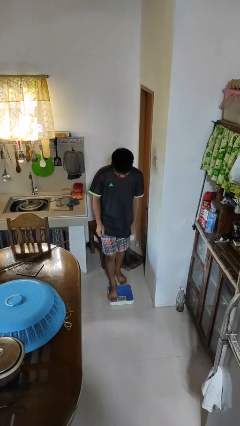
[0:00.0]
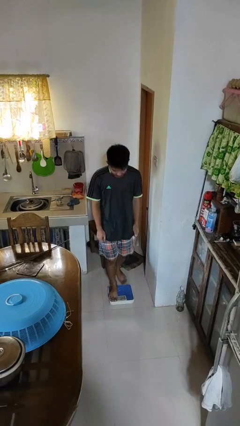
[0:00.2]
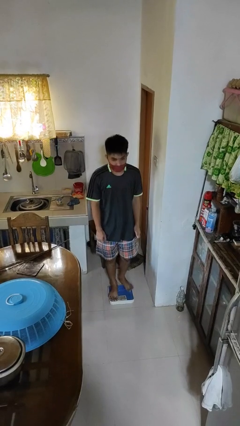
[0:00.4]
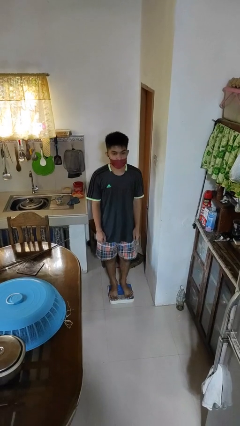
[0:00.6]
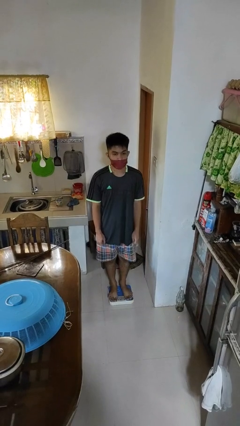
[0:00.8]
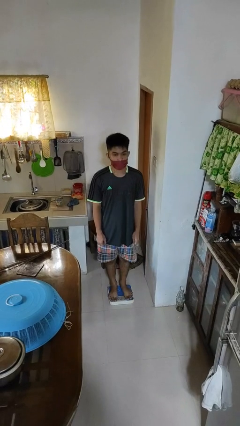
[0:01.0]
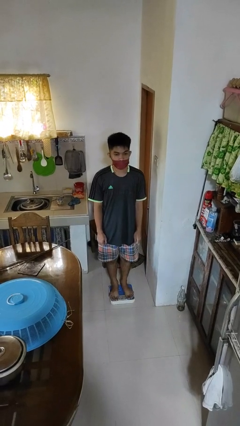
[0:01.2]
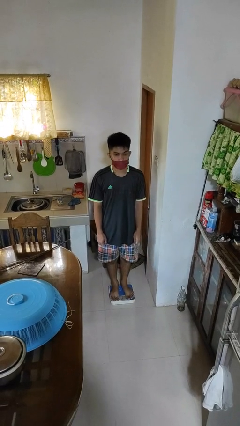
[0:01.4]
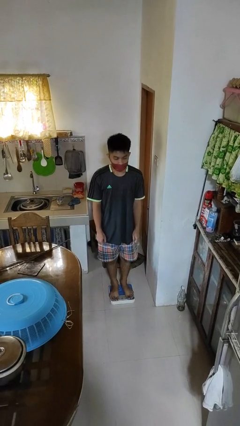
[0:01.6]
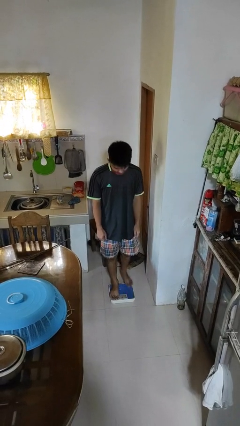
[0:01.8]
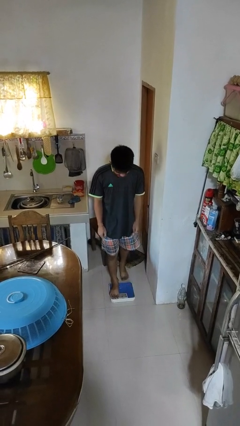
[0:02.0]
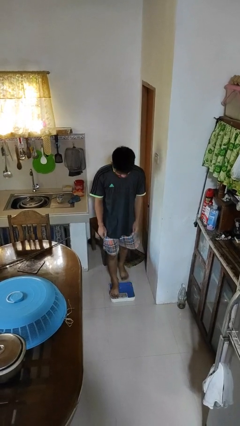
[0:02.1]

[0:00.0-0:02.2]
person uses bodyweight scale

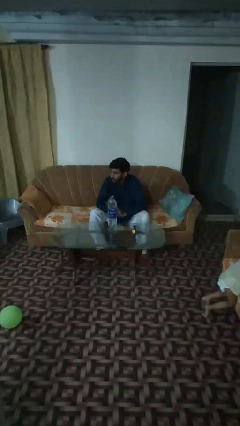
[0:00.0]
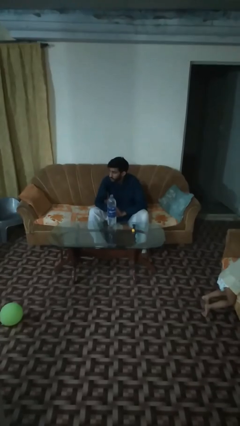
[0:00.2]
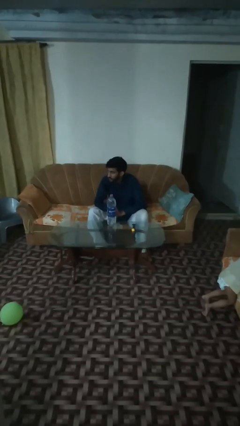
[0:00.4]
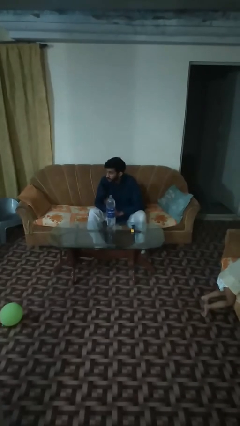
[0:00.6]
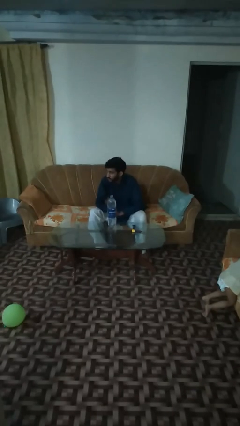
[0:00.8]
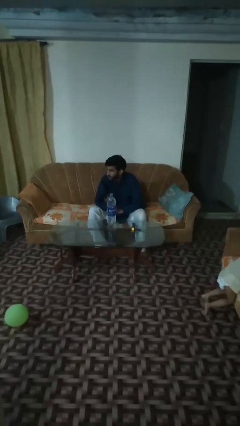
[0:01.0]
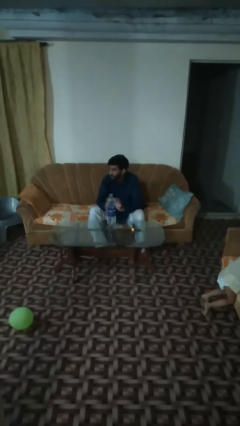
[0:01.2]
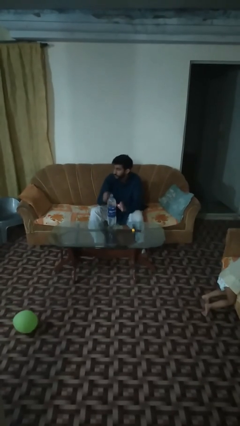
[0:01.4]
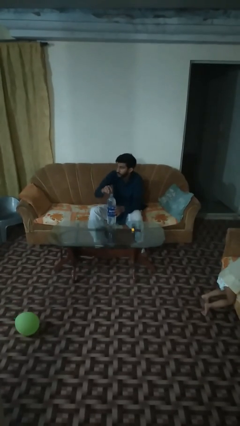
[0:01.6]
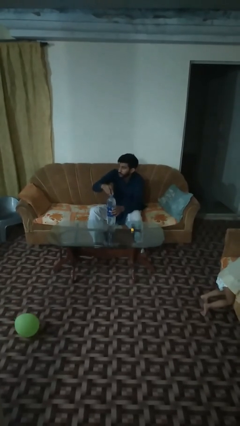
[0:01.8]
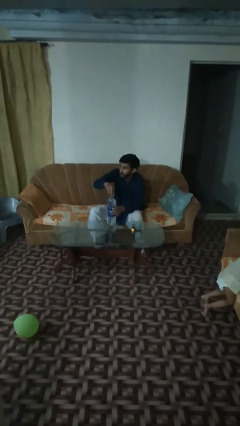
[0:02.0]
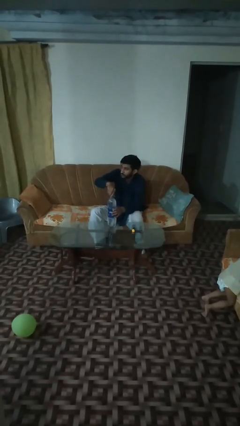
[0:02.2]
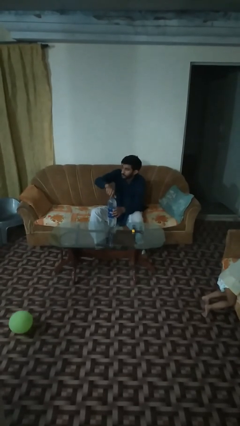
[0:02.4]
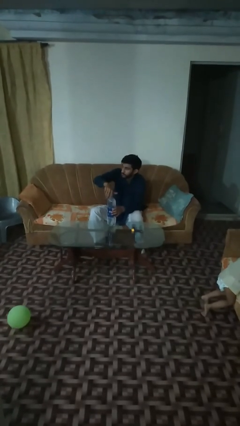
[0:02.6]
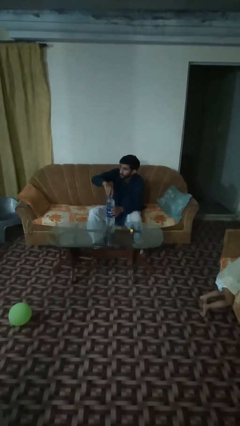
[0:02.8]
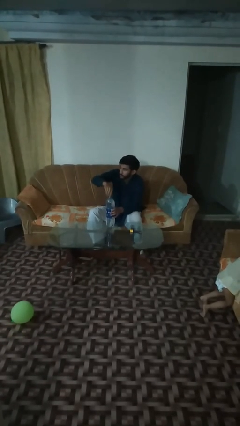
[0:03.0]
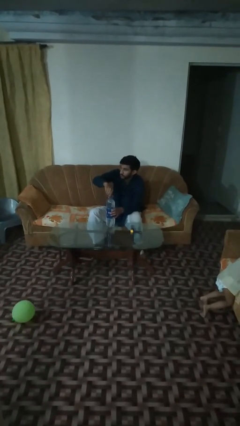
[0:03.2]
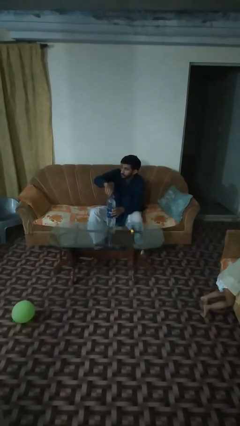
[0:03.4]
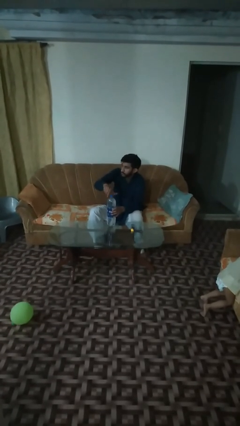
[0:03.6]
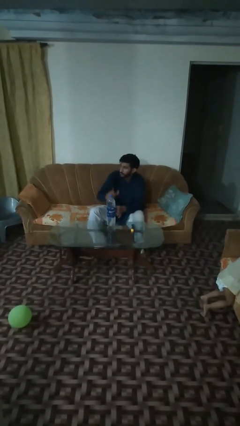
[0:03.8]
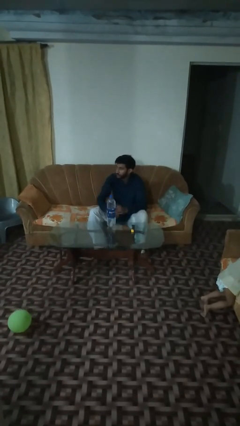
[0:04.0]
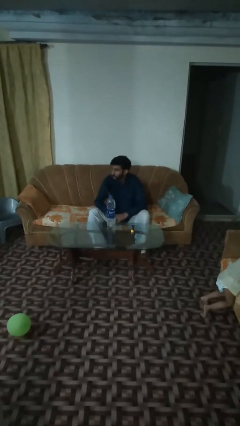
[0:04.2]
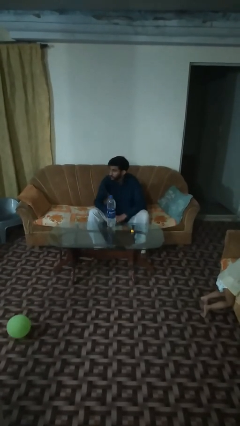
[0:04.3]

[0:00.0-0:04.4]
person screws lid to bottle

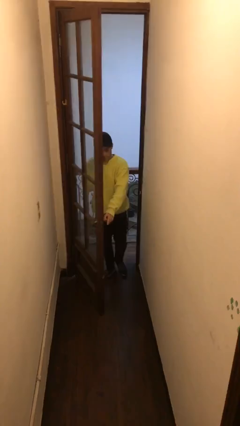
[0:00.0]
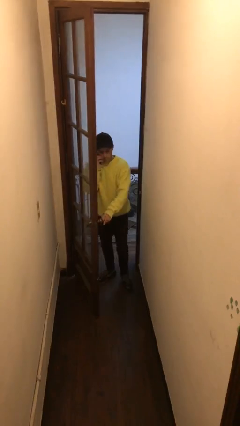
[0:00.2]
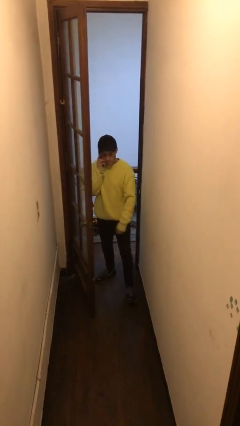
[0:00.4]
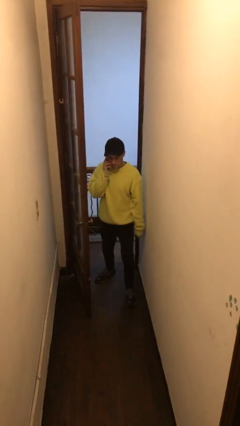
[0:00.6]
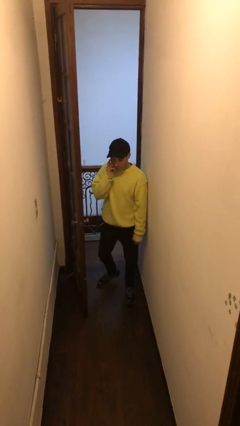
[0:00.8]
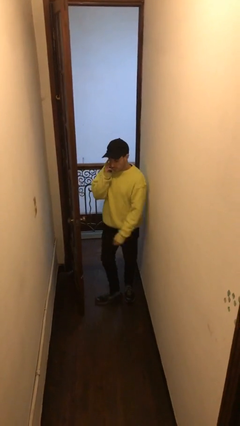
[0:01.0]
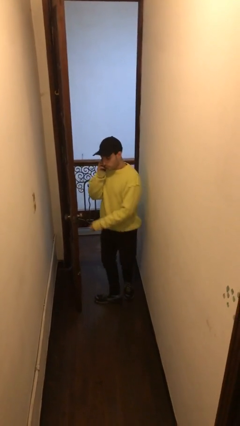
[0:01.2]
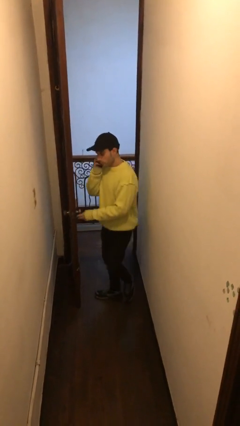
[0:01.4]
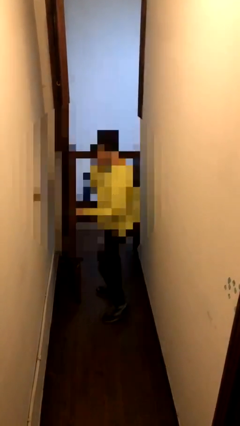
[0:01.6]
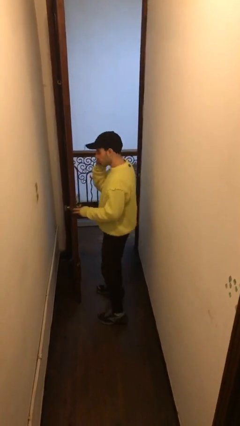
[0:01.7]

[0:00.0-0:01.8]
person enters scene through structure

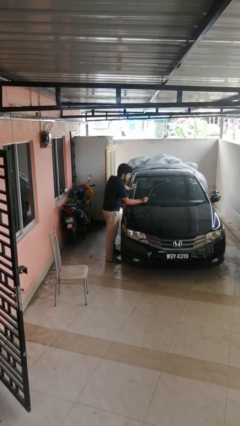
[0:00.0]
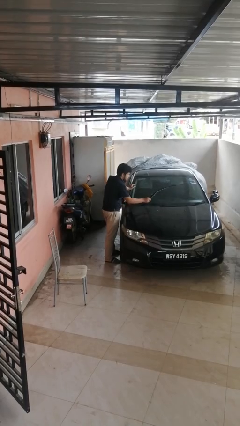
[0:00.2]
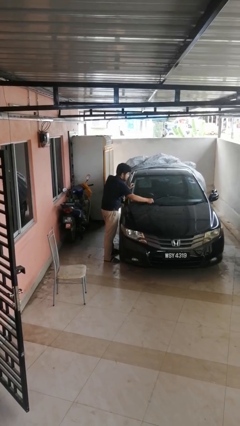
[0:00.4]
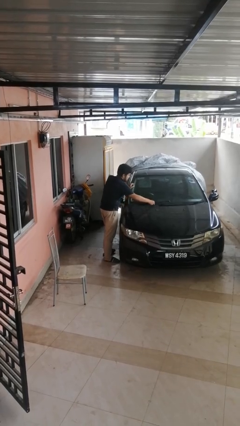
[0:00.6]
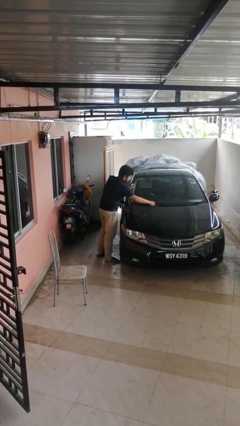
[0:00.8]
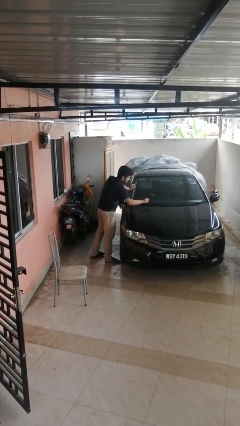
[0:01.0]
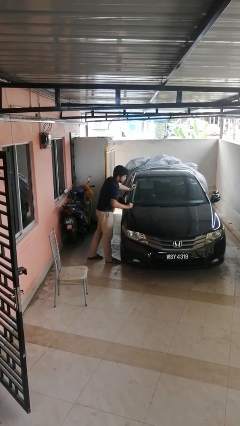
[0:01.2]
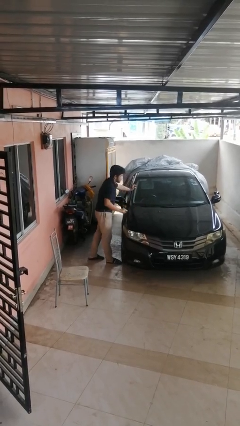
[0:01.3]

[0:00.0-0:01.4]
person flips down car wipers

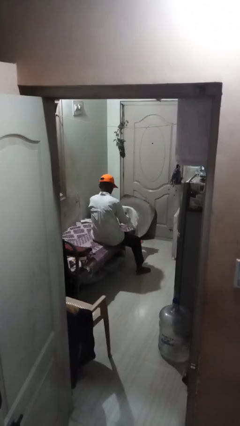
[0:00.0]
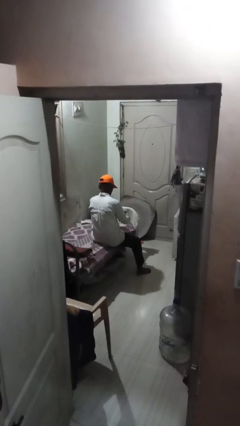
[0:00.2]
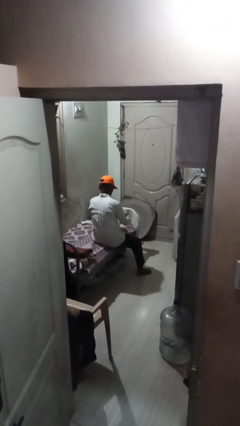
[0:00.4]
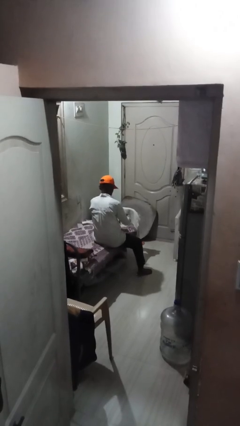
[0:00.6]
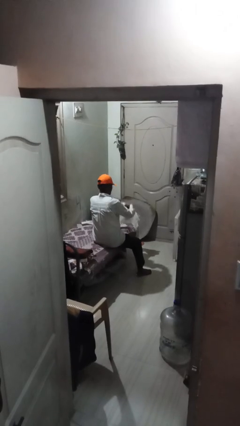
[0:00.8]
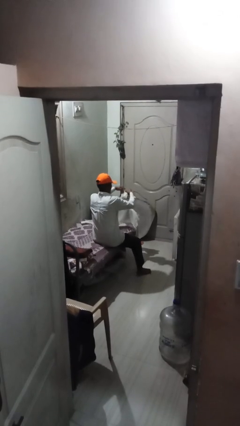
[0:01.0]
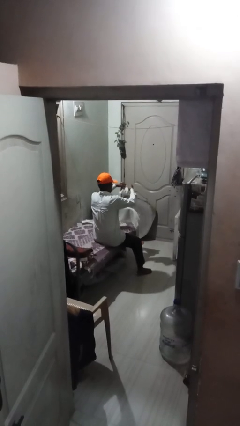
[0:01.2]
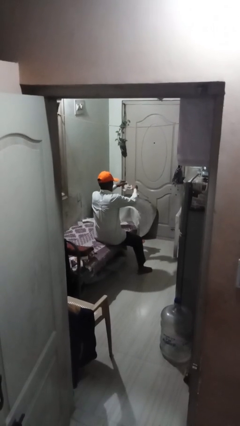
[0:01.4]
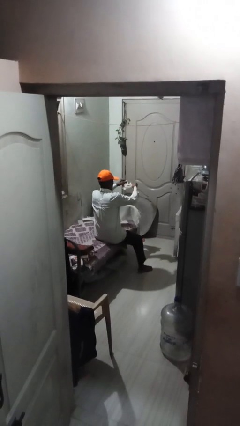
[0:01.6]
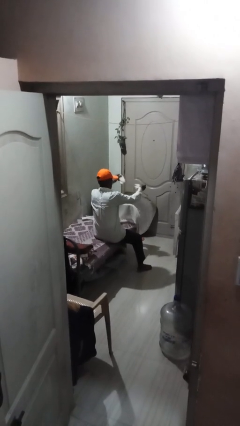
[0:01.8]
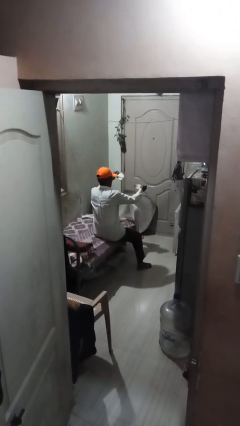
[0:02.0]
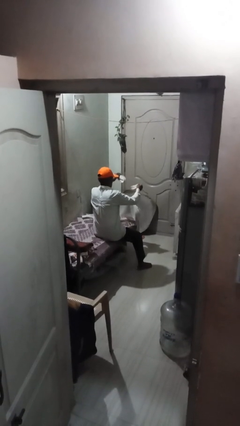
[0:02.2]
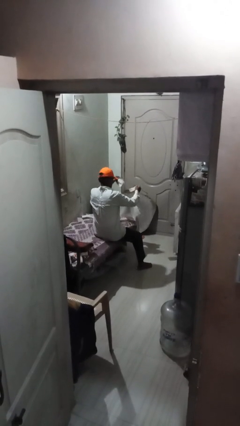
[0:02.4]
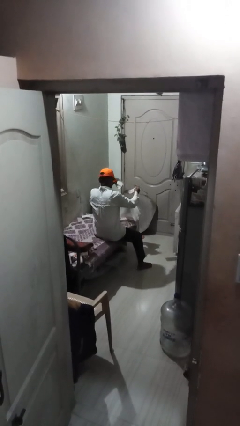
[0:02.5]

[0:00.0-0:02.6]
person tears paper

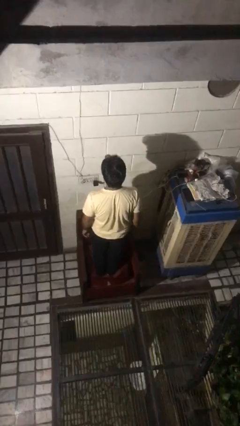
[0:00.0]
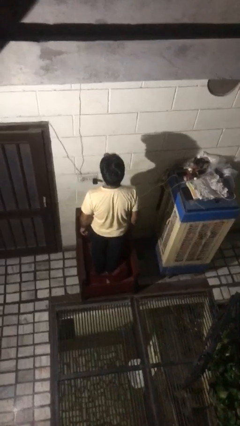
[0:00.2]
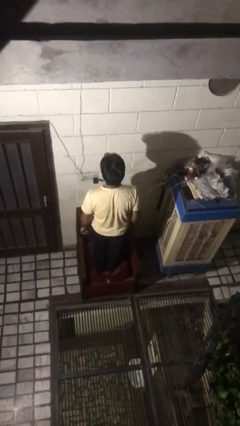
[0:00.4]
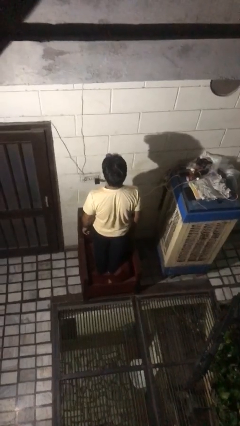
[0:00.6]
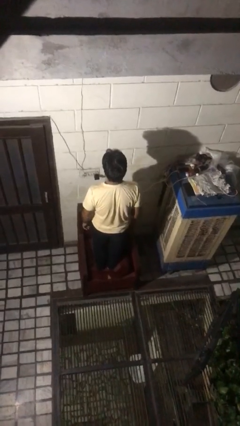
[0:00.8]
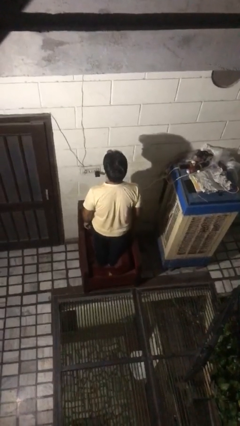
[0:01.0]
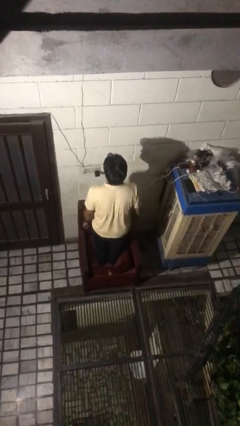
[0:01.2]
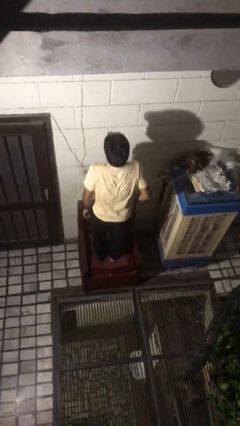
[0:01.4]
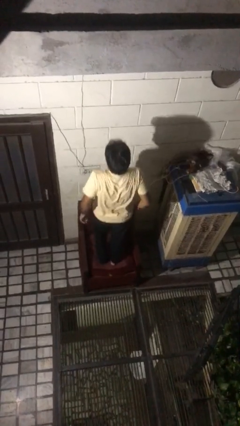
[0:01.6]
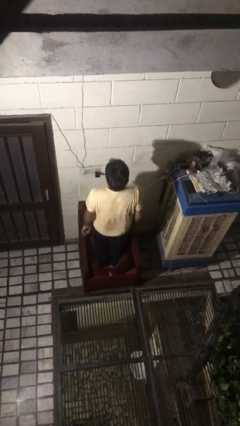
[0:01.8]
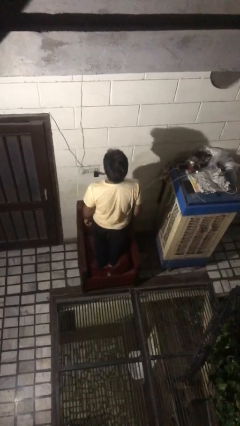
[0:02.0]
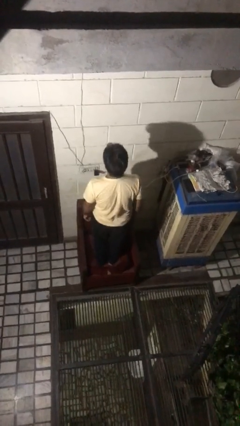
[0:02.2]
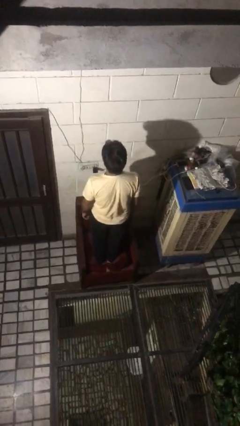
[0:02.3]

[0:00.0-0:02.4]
person jumps on couch

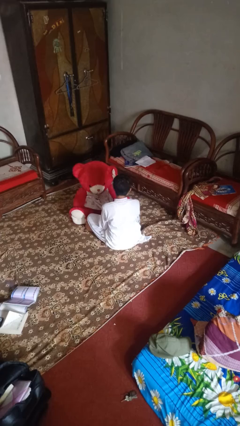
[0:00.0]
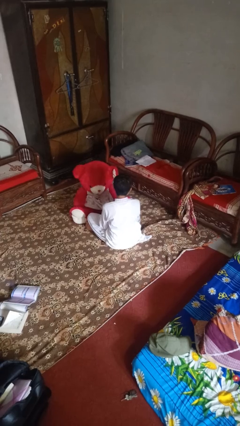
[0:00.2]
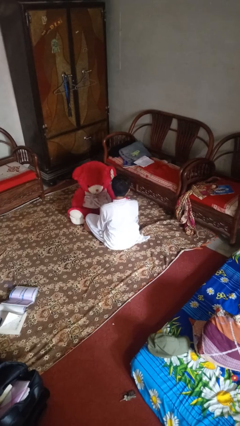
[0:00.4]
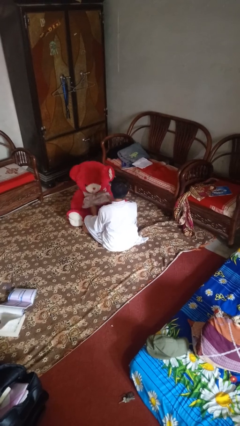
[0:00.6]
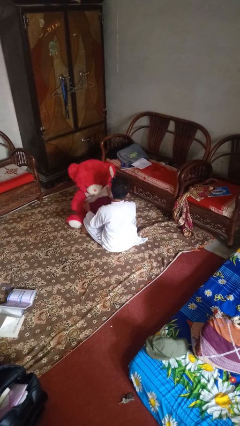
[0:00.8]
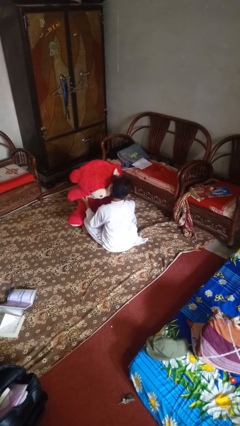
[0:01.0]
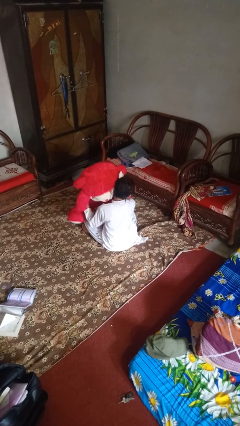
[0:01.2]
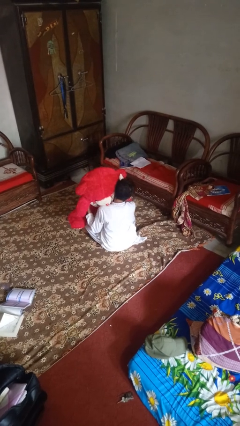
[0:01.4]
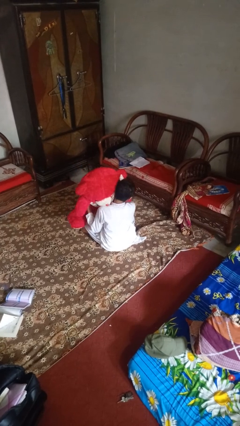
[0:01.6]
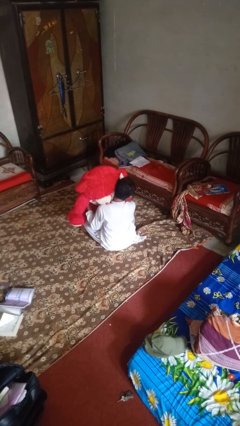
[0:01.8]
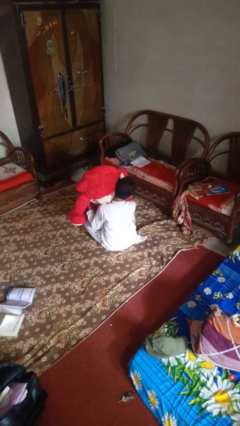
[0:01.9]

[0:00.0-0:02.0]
person hugs stuffed animal

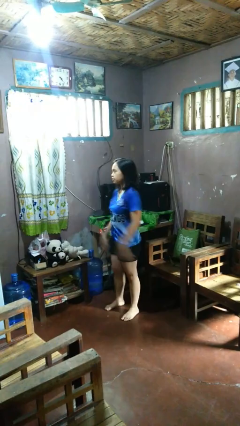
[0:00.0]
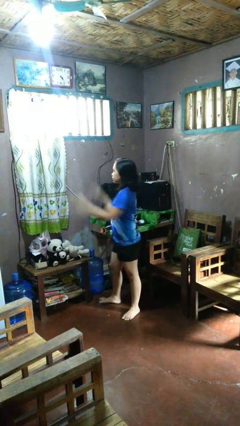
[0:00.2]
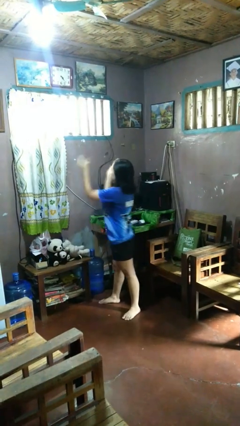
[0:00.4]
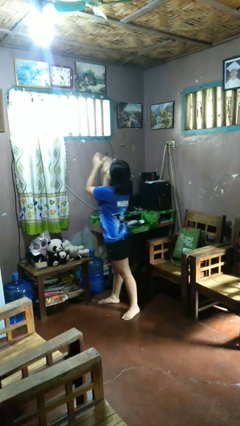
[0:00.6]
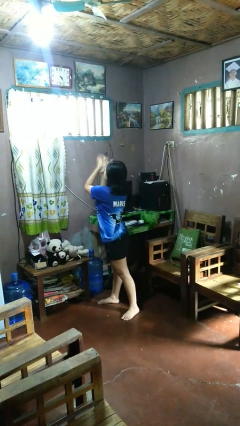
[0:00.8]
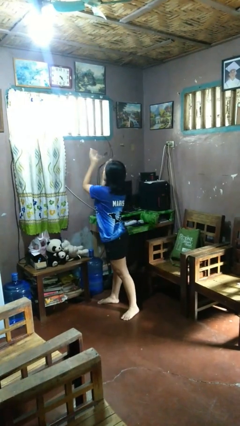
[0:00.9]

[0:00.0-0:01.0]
person claps hands
